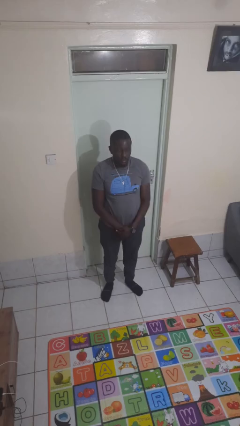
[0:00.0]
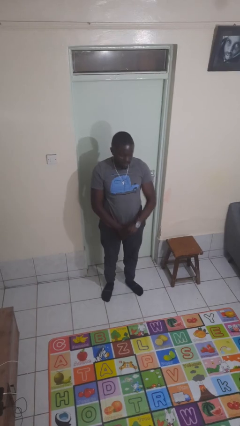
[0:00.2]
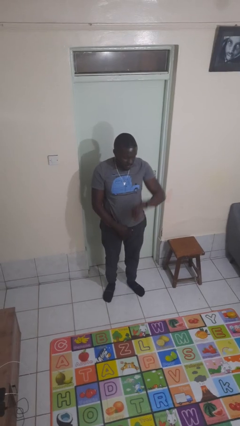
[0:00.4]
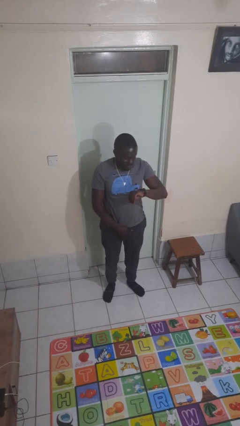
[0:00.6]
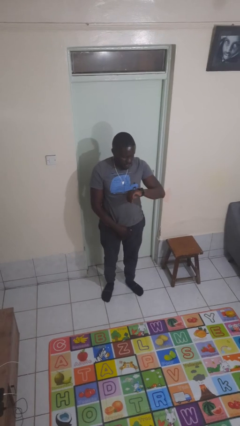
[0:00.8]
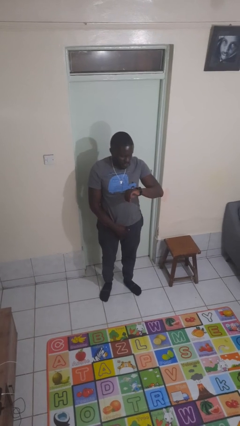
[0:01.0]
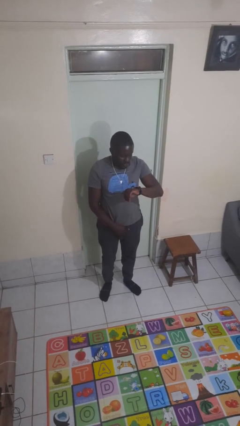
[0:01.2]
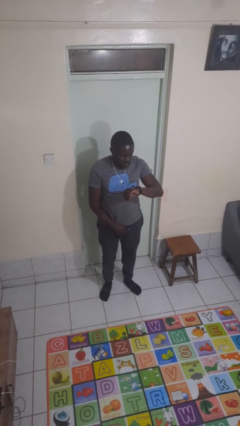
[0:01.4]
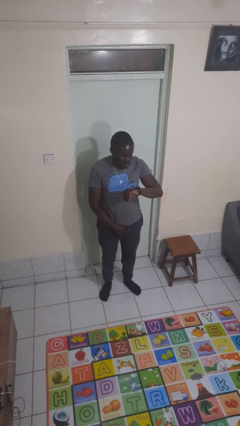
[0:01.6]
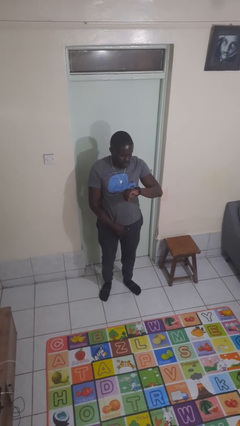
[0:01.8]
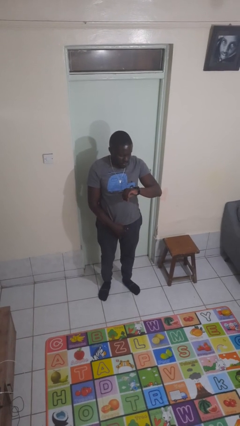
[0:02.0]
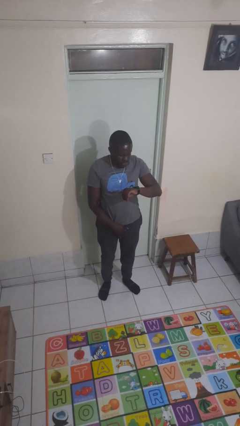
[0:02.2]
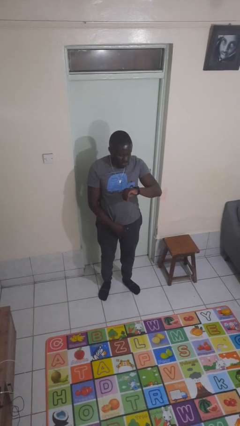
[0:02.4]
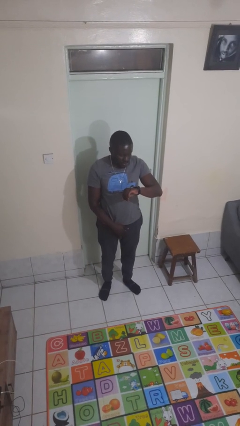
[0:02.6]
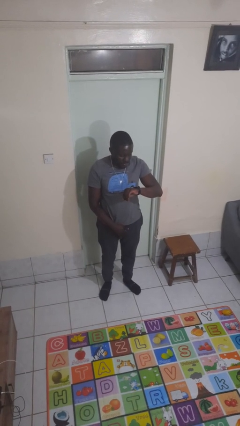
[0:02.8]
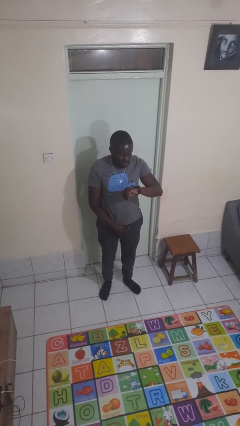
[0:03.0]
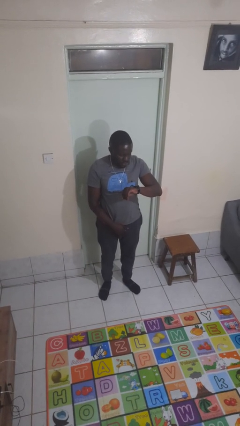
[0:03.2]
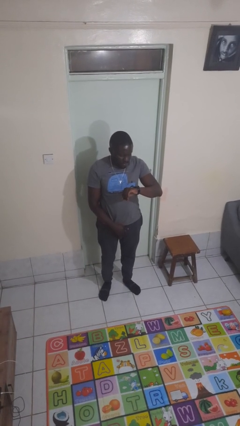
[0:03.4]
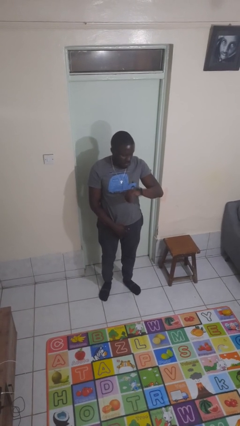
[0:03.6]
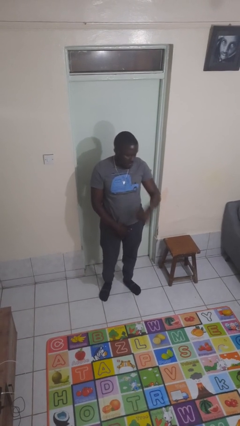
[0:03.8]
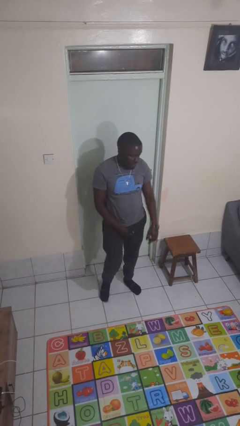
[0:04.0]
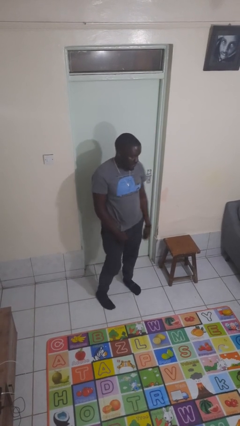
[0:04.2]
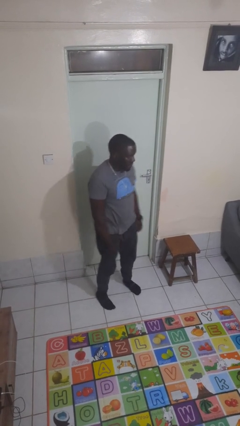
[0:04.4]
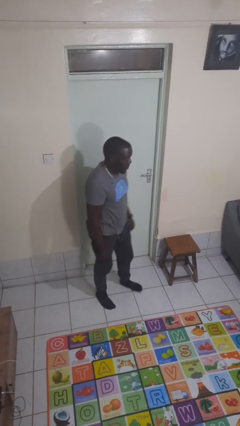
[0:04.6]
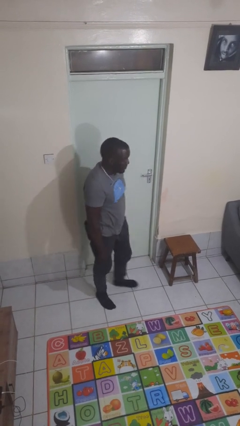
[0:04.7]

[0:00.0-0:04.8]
person looks at wristwatch

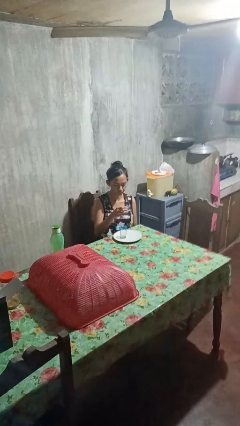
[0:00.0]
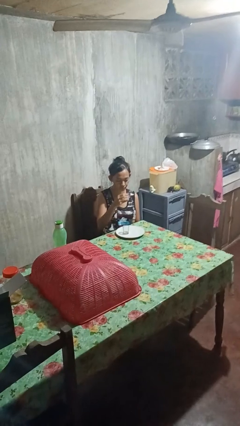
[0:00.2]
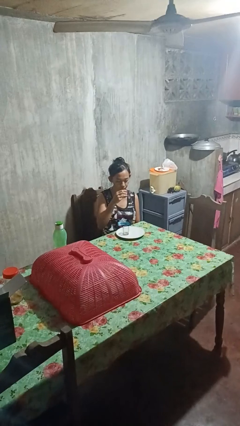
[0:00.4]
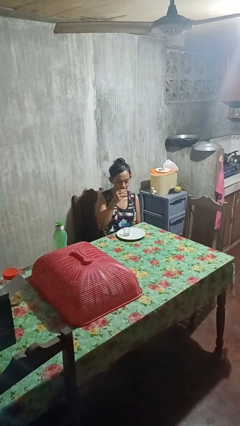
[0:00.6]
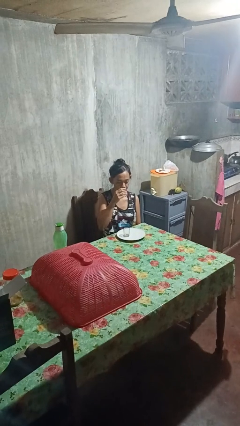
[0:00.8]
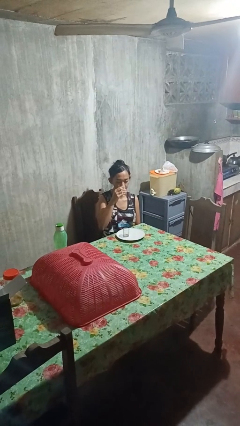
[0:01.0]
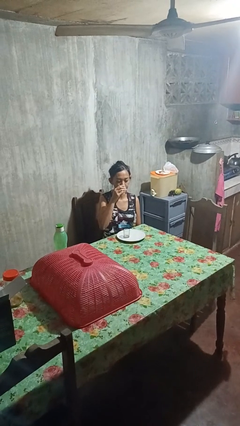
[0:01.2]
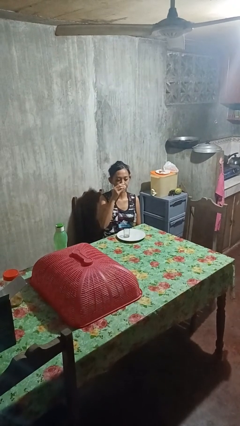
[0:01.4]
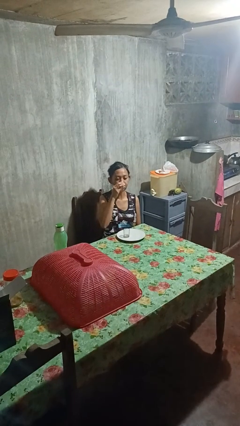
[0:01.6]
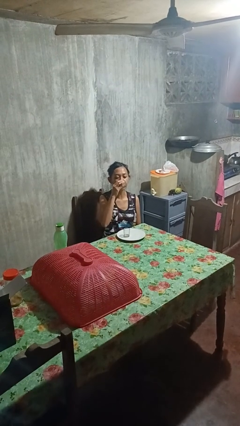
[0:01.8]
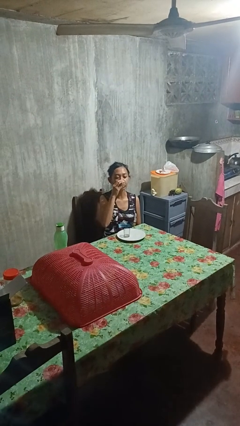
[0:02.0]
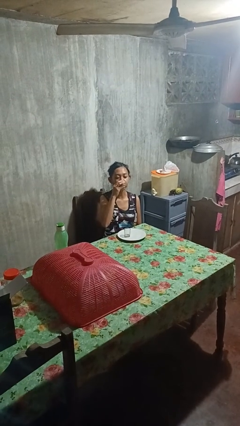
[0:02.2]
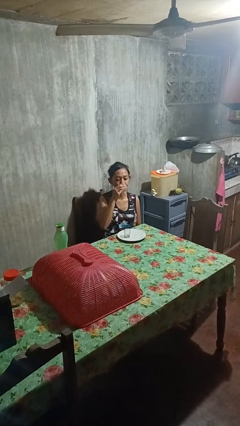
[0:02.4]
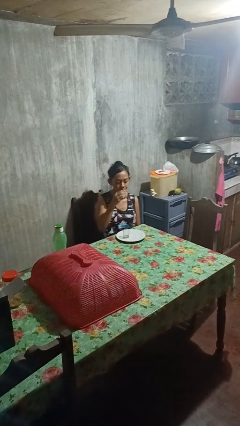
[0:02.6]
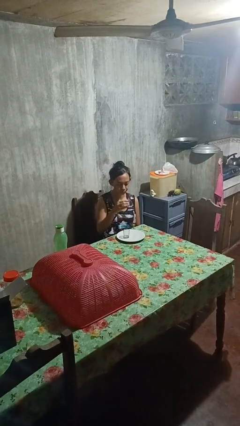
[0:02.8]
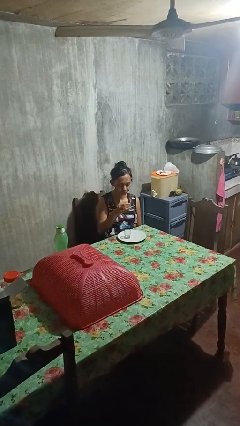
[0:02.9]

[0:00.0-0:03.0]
person drinks from shotglass

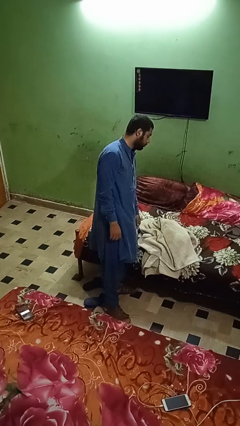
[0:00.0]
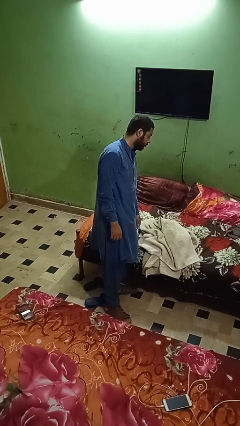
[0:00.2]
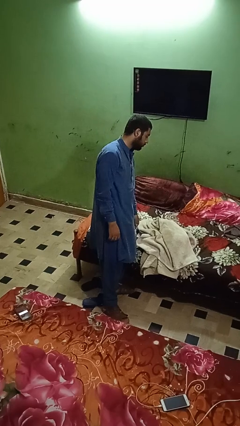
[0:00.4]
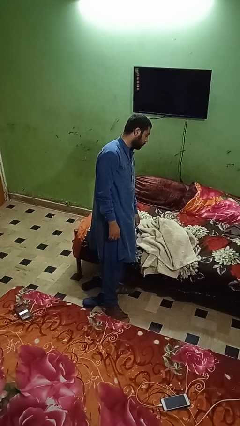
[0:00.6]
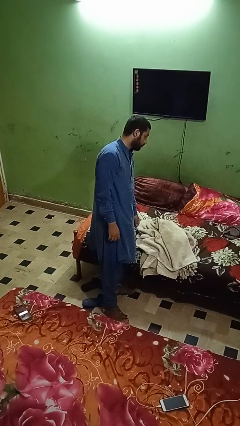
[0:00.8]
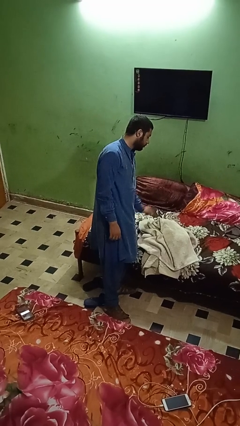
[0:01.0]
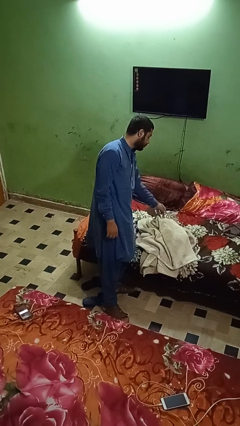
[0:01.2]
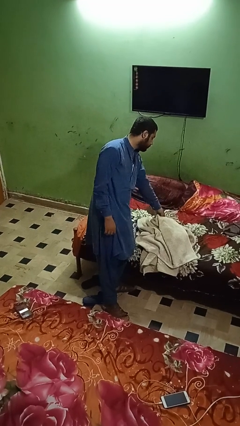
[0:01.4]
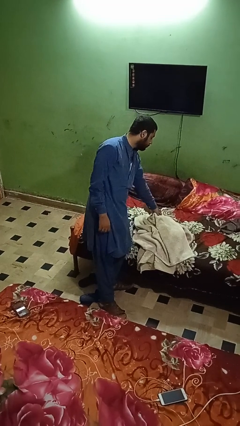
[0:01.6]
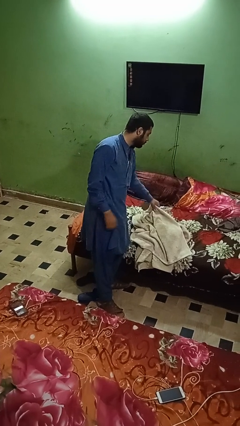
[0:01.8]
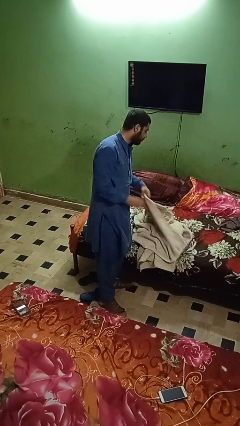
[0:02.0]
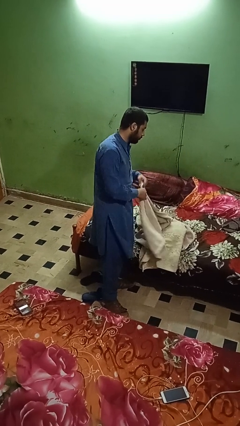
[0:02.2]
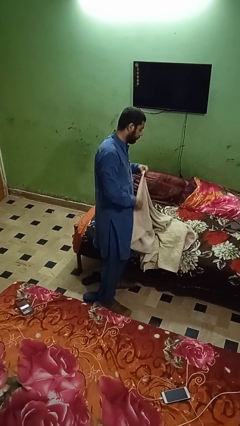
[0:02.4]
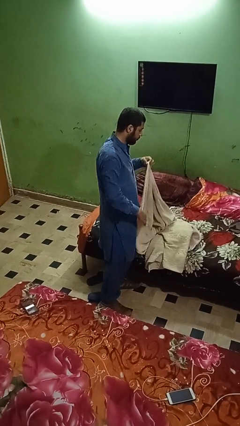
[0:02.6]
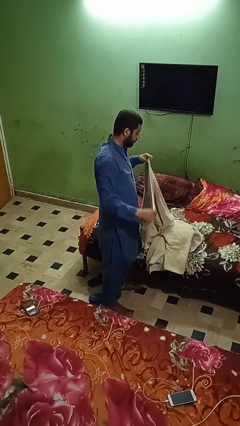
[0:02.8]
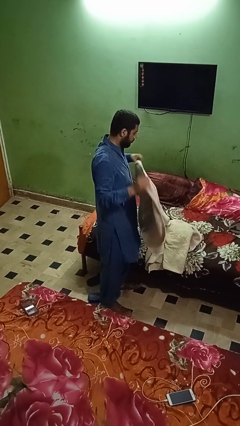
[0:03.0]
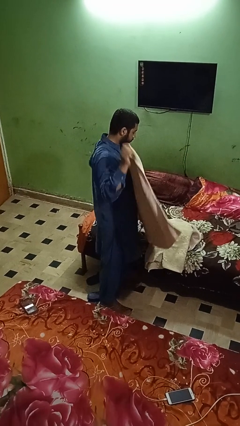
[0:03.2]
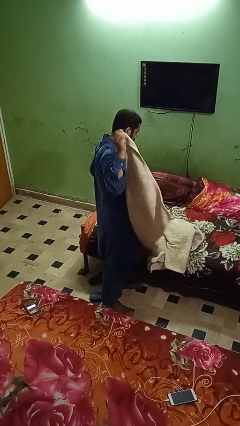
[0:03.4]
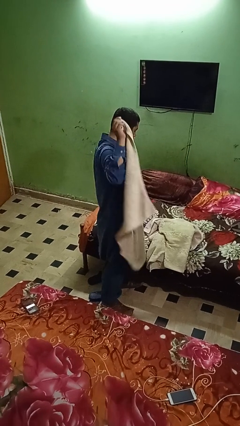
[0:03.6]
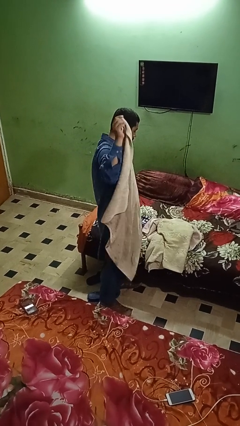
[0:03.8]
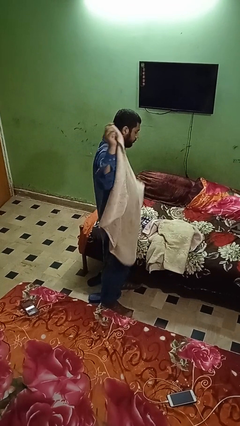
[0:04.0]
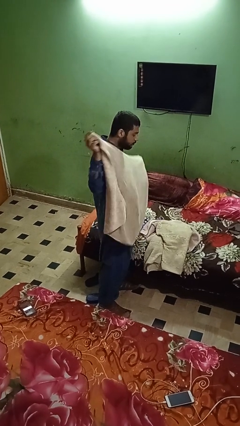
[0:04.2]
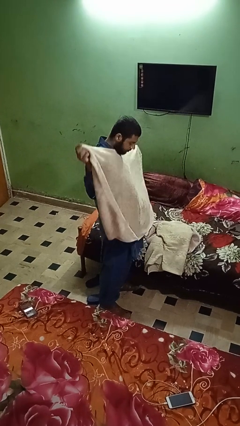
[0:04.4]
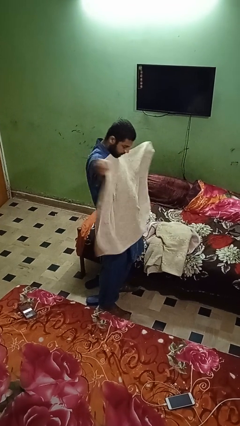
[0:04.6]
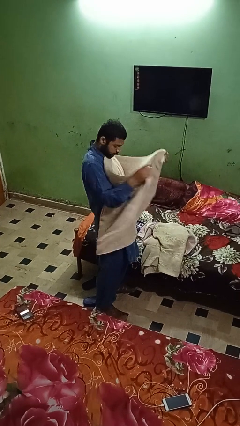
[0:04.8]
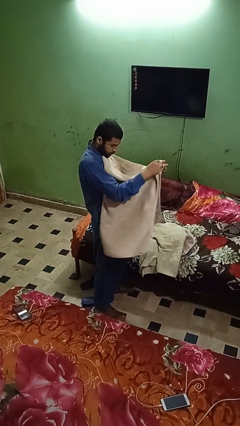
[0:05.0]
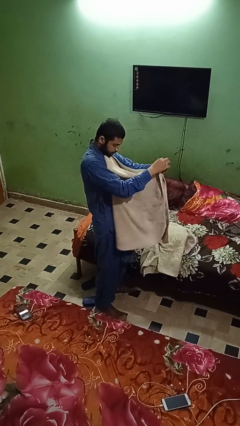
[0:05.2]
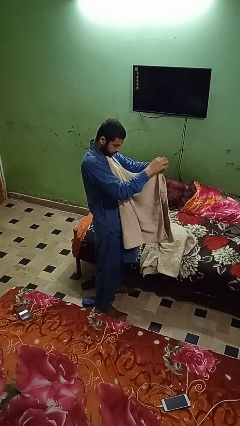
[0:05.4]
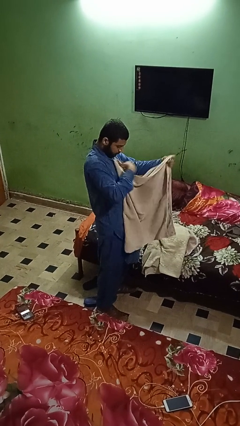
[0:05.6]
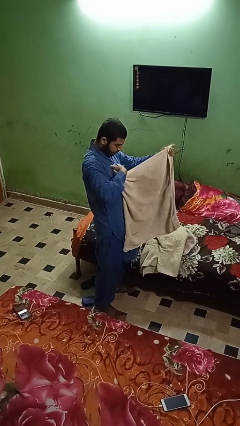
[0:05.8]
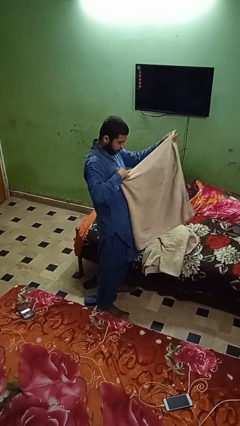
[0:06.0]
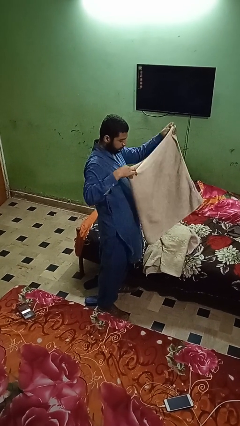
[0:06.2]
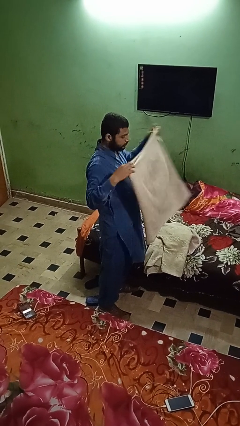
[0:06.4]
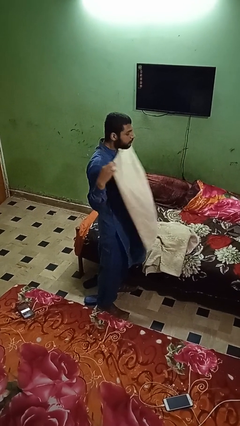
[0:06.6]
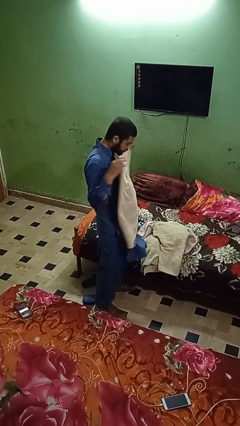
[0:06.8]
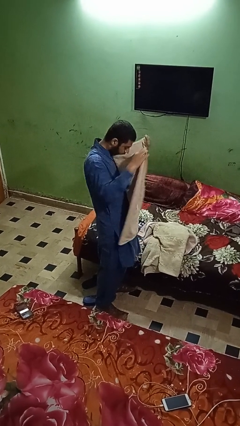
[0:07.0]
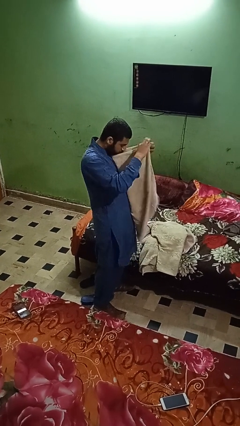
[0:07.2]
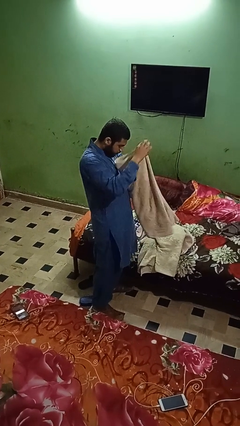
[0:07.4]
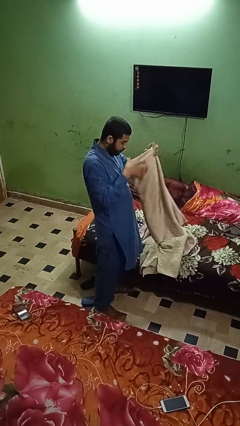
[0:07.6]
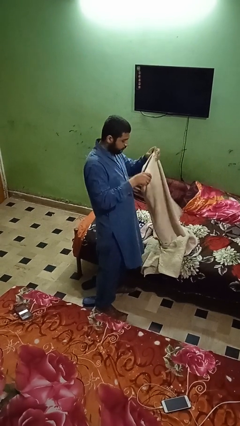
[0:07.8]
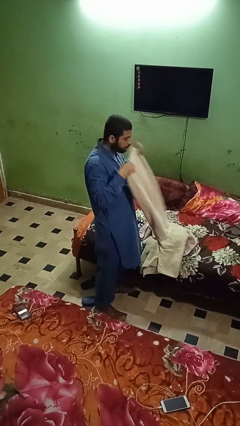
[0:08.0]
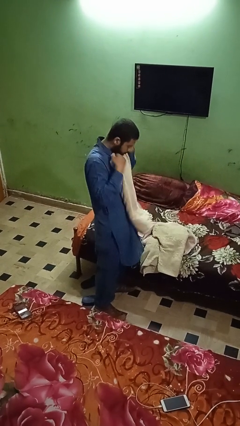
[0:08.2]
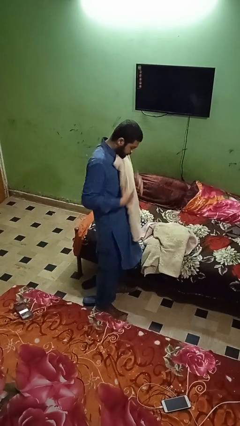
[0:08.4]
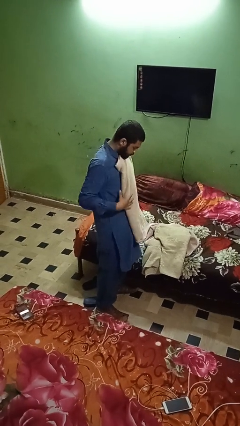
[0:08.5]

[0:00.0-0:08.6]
person folds towel

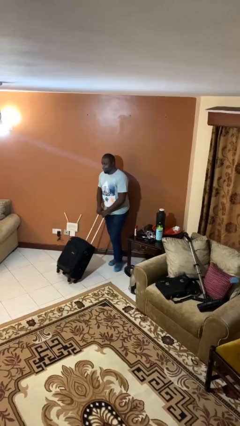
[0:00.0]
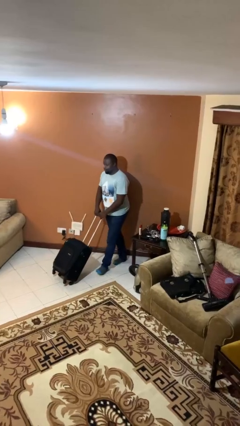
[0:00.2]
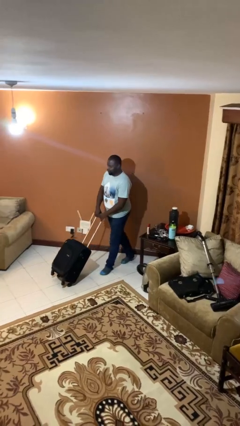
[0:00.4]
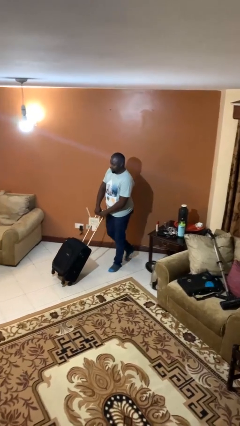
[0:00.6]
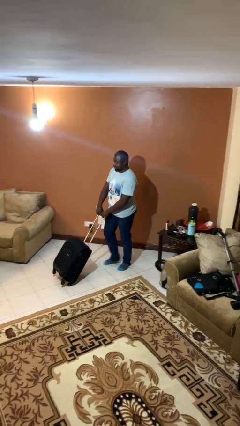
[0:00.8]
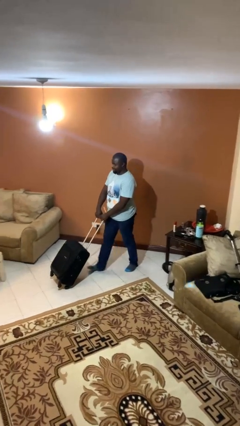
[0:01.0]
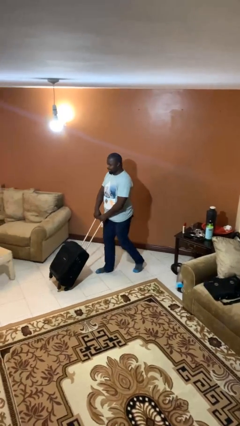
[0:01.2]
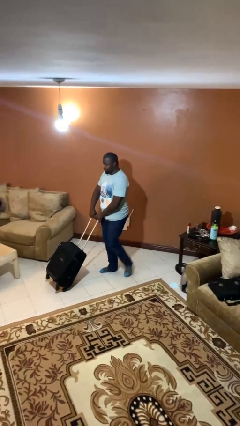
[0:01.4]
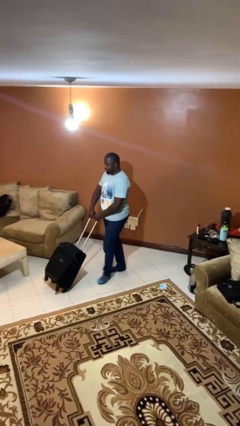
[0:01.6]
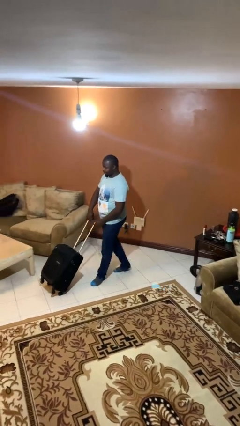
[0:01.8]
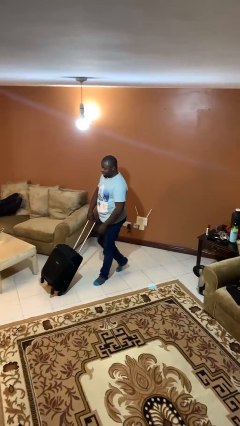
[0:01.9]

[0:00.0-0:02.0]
person pushes wheeled cart
